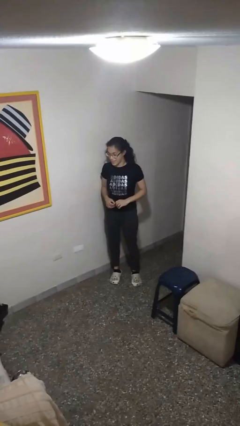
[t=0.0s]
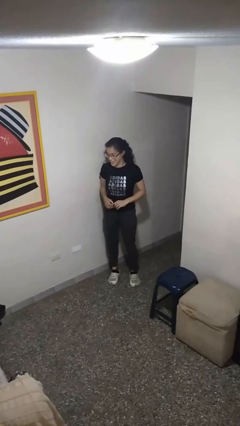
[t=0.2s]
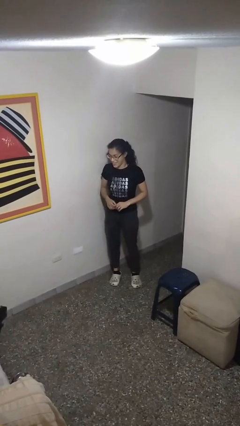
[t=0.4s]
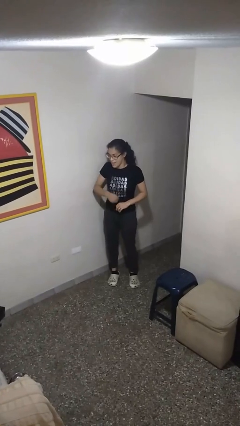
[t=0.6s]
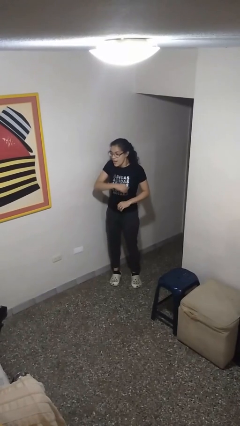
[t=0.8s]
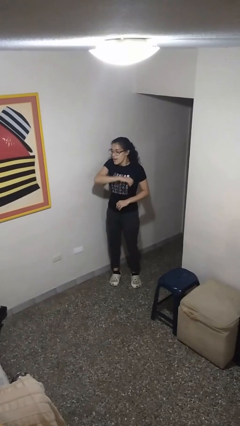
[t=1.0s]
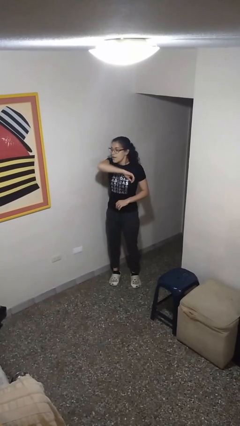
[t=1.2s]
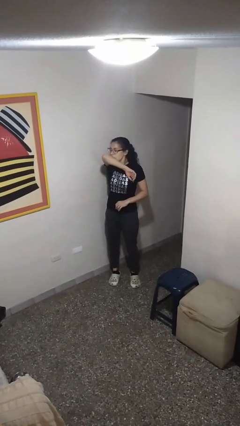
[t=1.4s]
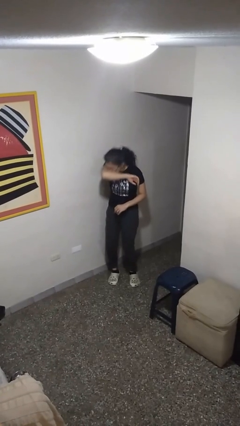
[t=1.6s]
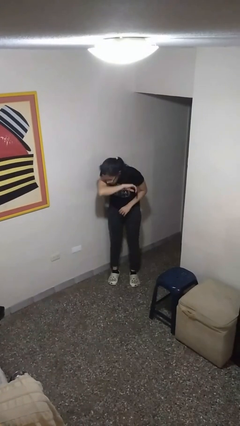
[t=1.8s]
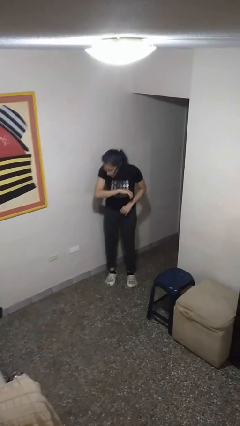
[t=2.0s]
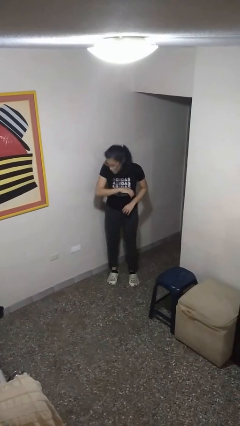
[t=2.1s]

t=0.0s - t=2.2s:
person sneezes into arm

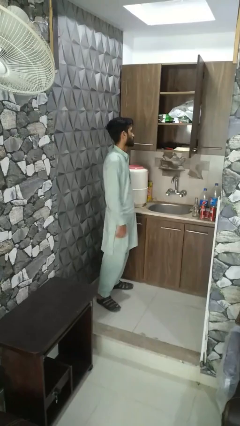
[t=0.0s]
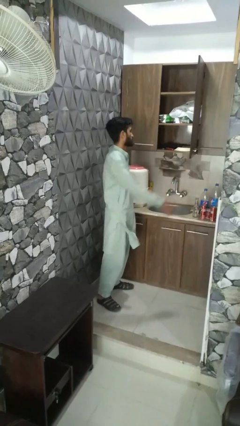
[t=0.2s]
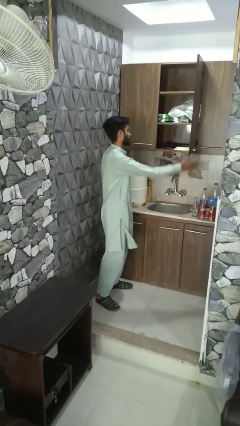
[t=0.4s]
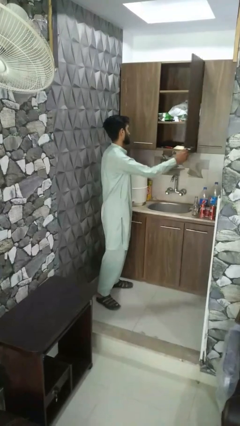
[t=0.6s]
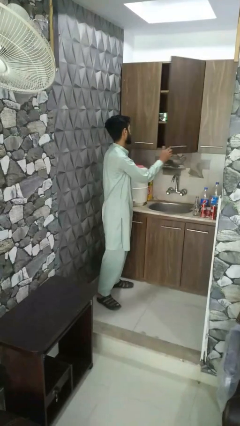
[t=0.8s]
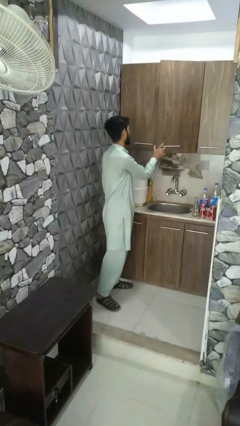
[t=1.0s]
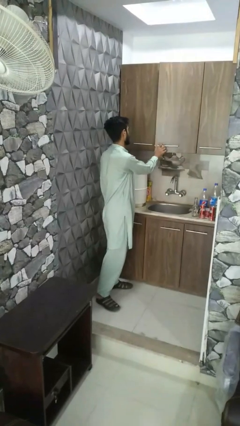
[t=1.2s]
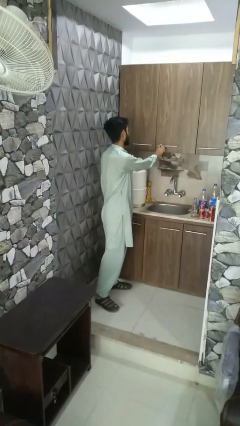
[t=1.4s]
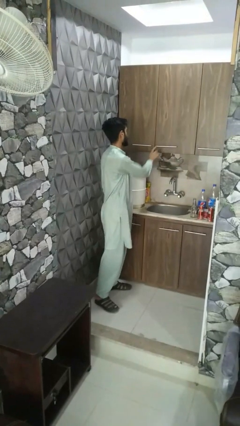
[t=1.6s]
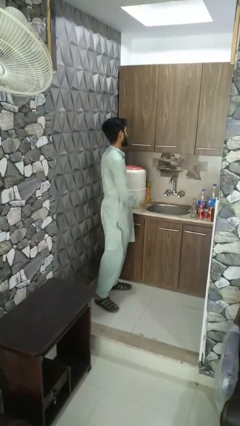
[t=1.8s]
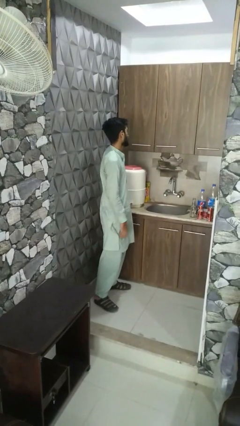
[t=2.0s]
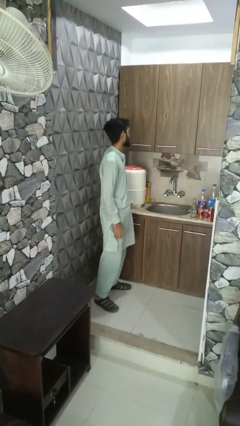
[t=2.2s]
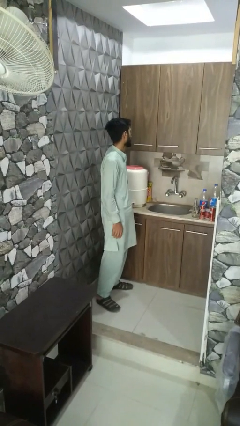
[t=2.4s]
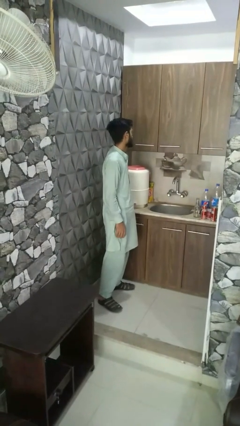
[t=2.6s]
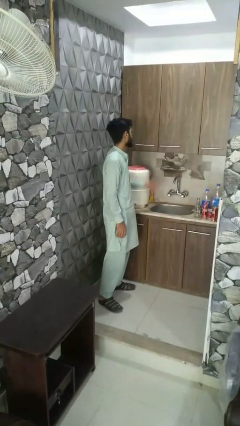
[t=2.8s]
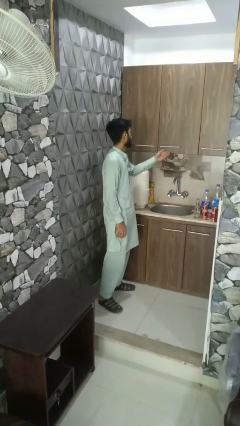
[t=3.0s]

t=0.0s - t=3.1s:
person closes cabinet

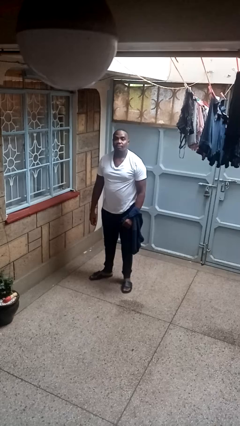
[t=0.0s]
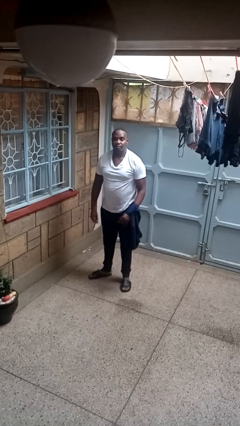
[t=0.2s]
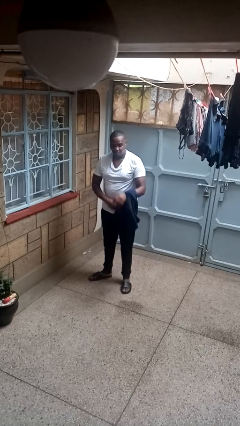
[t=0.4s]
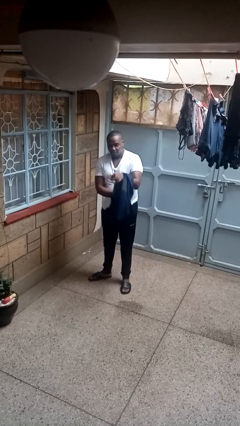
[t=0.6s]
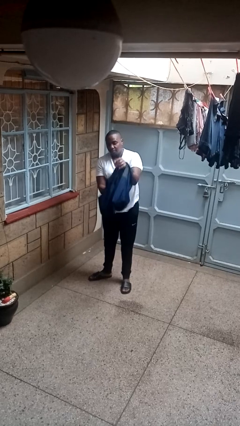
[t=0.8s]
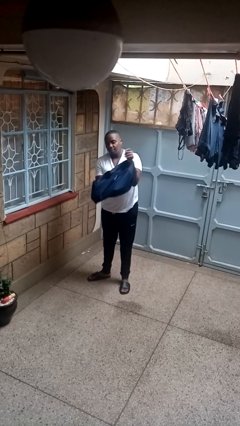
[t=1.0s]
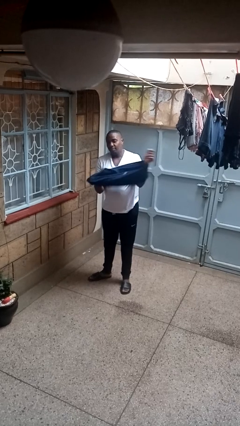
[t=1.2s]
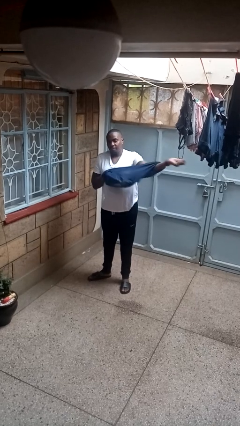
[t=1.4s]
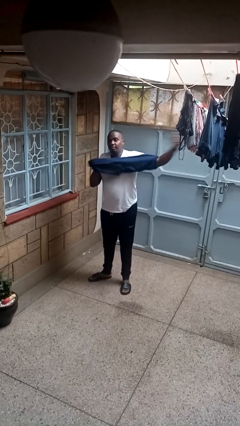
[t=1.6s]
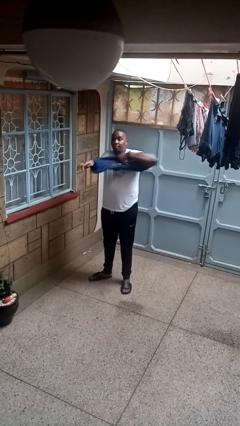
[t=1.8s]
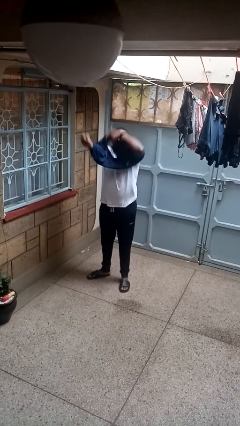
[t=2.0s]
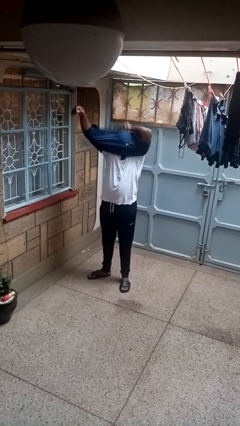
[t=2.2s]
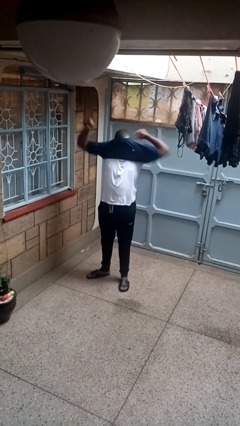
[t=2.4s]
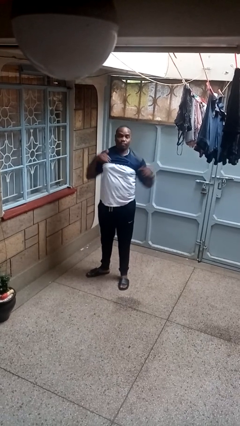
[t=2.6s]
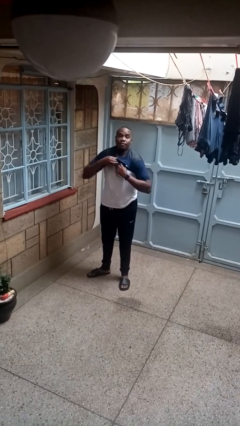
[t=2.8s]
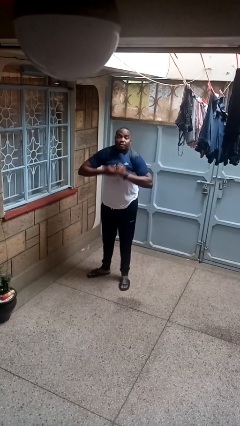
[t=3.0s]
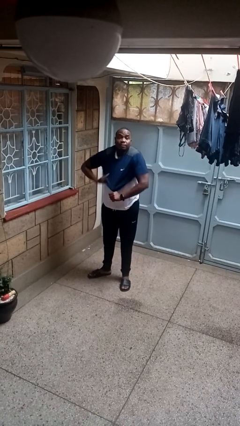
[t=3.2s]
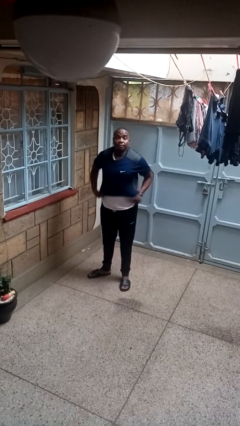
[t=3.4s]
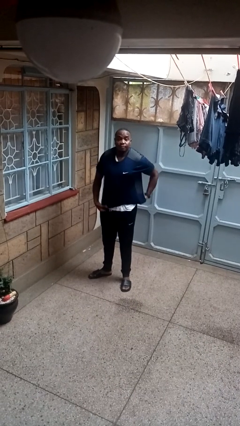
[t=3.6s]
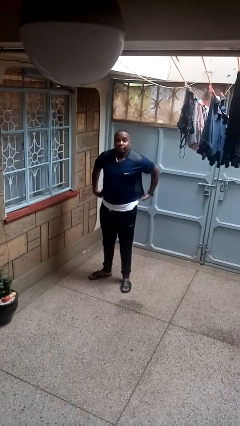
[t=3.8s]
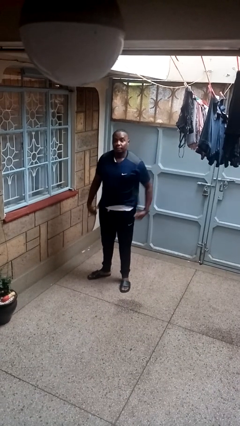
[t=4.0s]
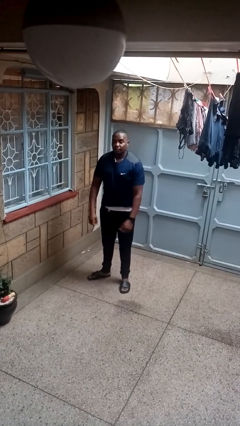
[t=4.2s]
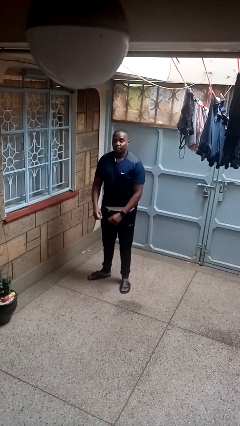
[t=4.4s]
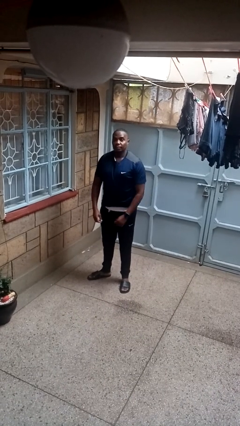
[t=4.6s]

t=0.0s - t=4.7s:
person puts on shirt

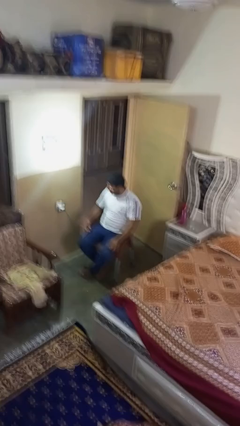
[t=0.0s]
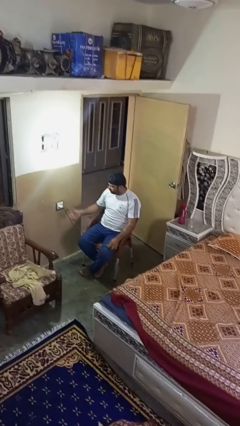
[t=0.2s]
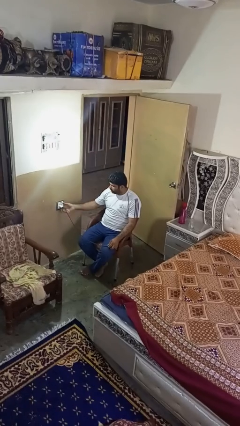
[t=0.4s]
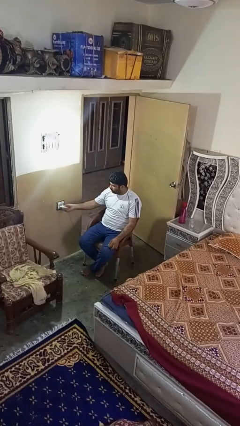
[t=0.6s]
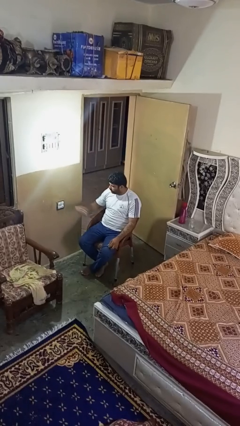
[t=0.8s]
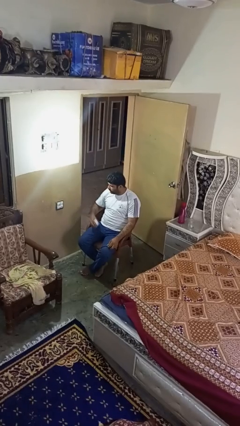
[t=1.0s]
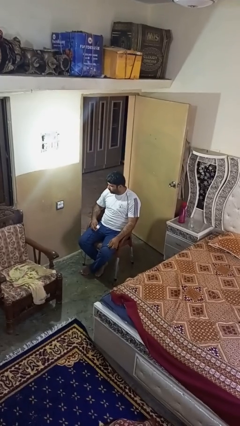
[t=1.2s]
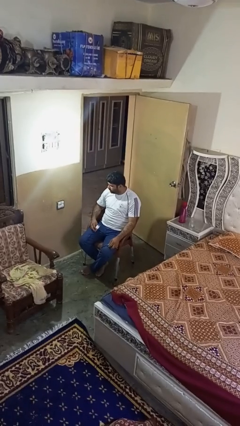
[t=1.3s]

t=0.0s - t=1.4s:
person unplugs from electrical socket

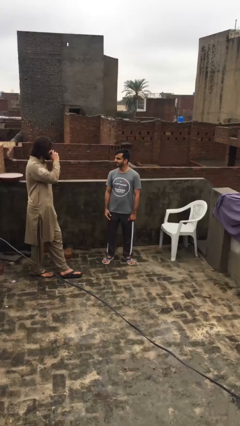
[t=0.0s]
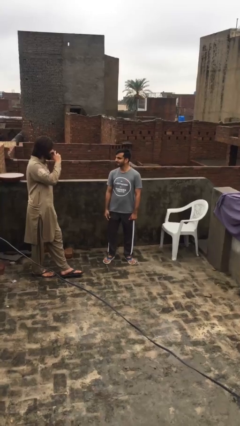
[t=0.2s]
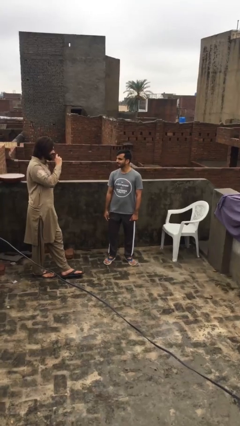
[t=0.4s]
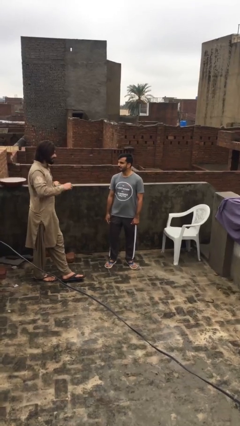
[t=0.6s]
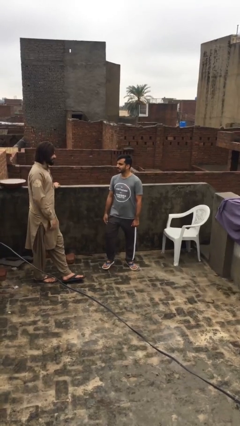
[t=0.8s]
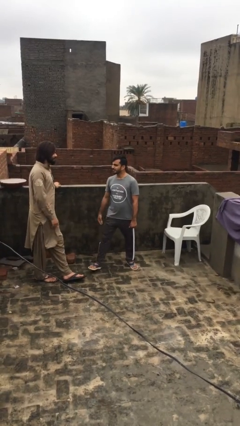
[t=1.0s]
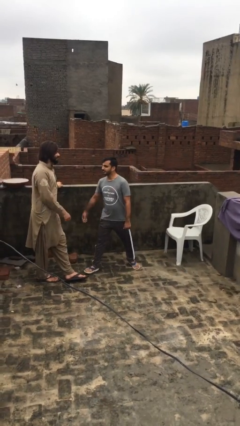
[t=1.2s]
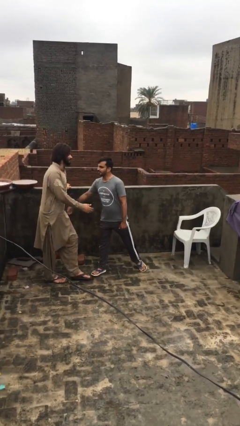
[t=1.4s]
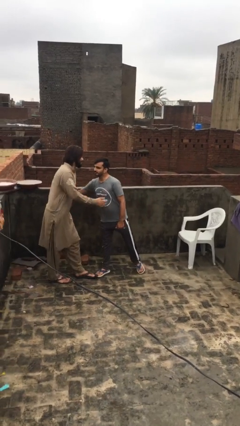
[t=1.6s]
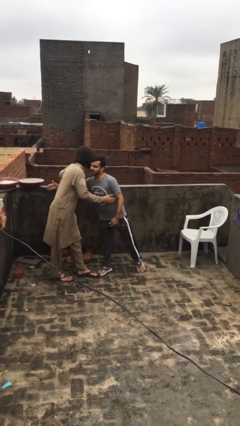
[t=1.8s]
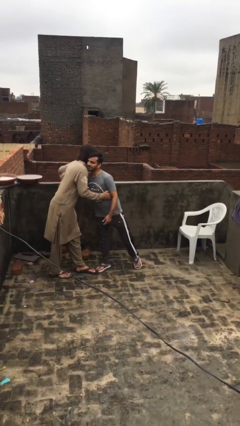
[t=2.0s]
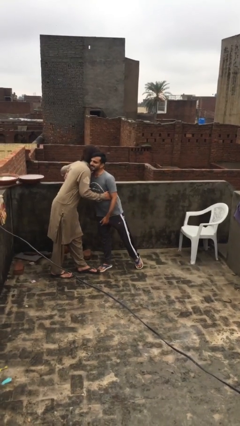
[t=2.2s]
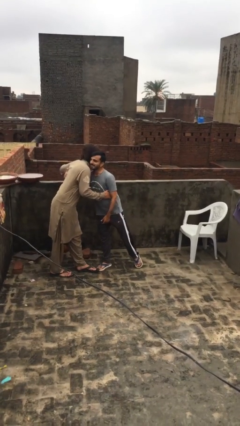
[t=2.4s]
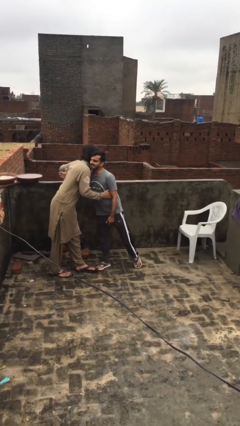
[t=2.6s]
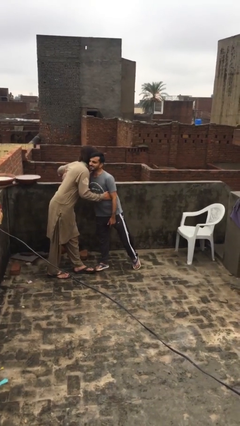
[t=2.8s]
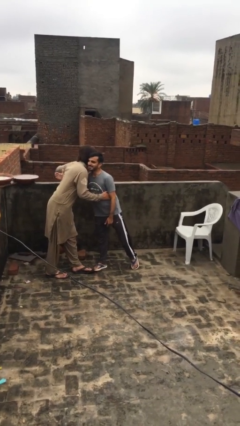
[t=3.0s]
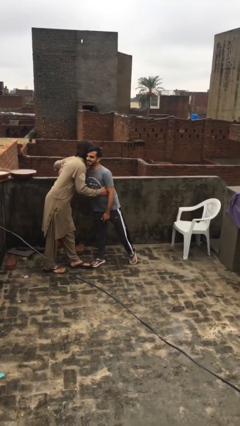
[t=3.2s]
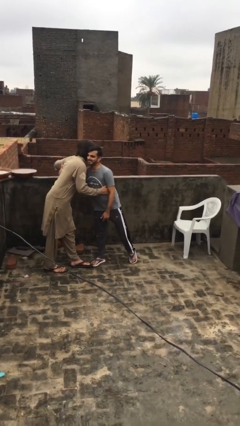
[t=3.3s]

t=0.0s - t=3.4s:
person embraces person

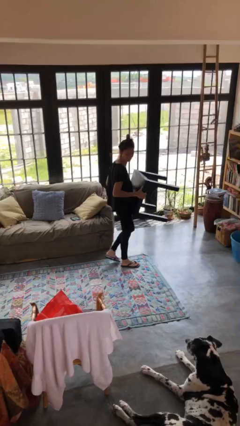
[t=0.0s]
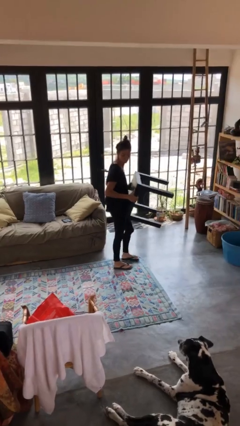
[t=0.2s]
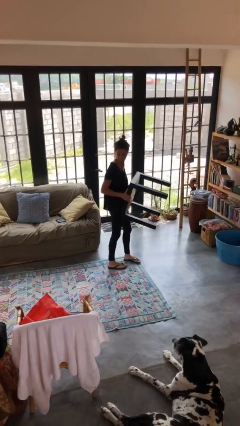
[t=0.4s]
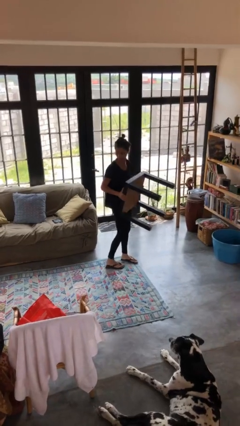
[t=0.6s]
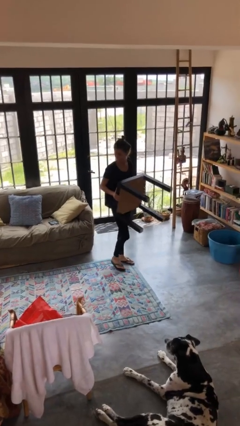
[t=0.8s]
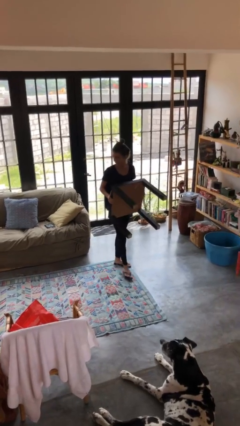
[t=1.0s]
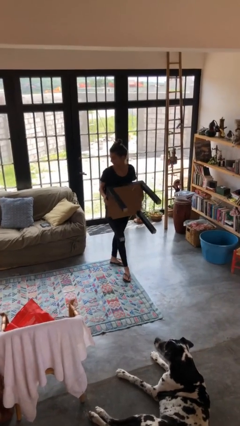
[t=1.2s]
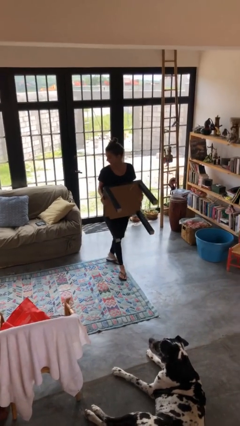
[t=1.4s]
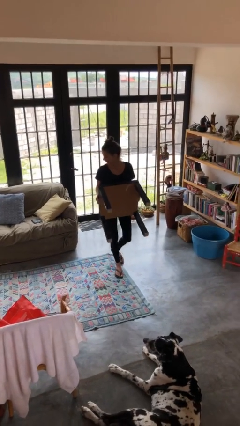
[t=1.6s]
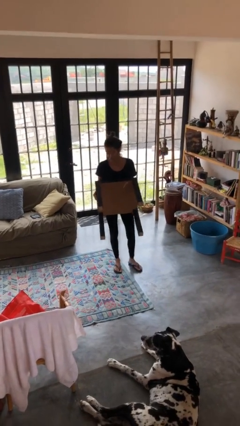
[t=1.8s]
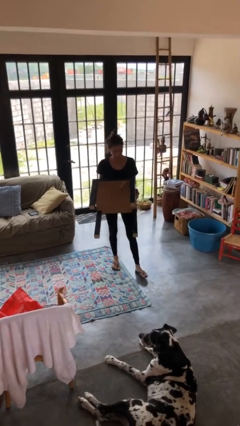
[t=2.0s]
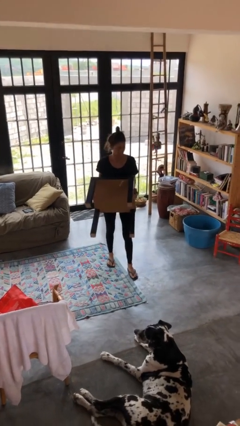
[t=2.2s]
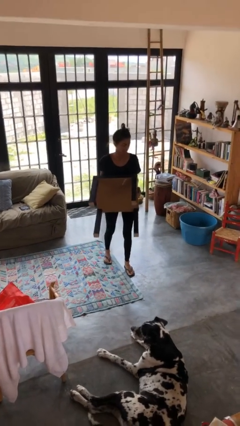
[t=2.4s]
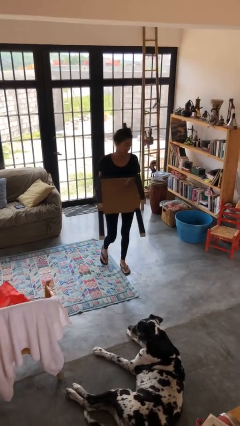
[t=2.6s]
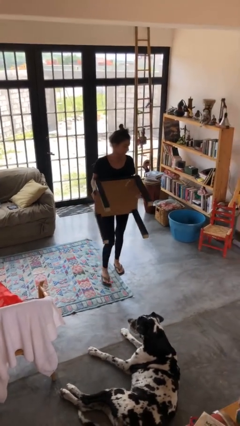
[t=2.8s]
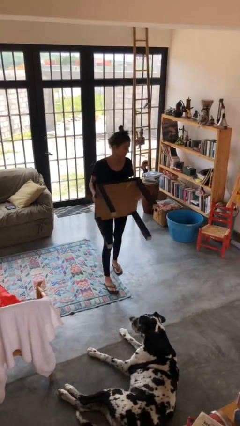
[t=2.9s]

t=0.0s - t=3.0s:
person carries furniture
